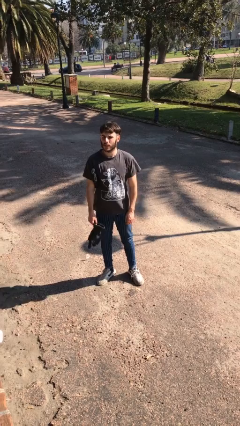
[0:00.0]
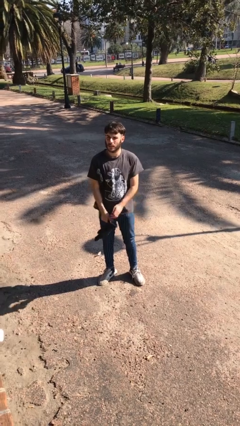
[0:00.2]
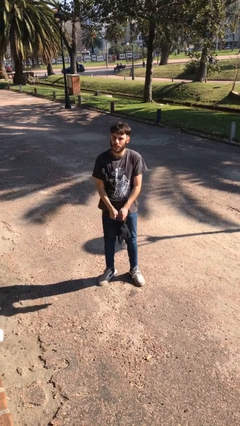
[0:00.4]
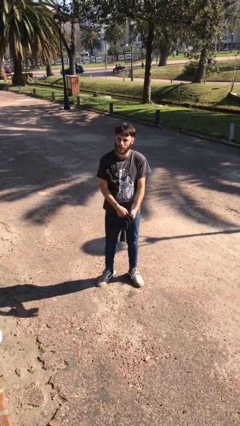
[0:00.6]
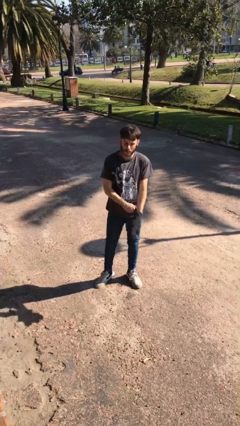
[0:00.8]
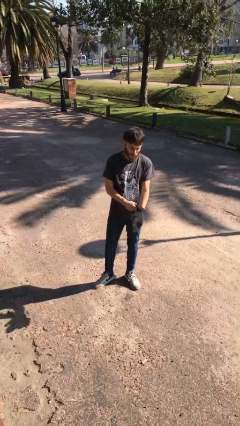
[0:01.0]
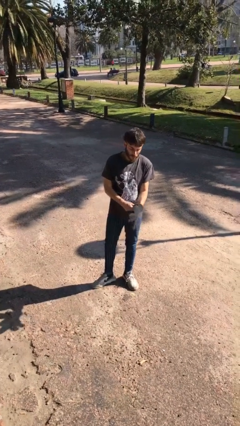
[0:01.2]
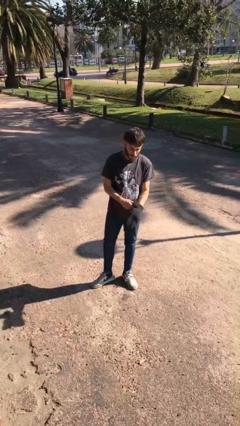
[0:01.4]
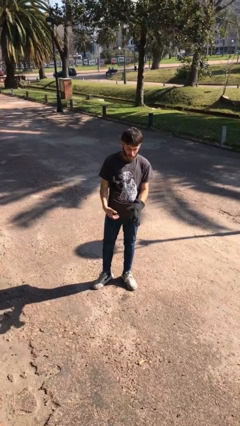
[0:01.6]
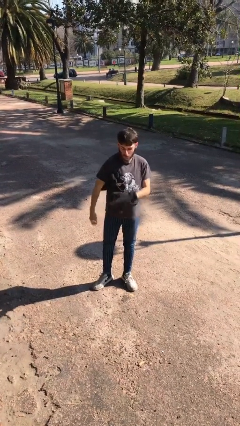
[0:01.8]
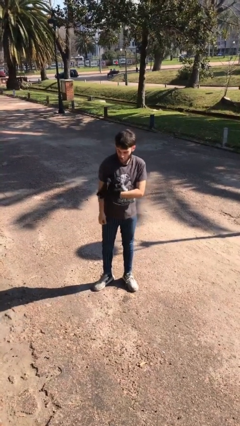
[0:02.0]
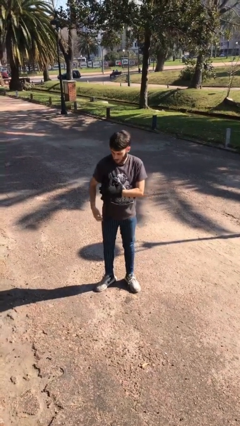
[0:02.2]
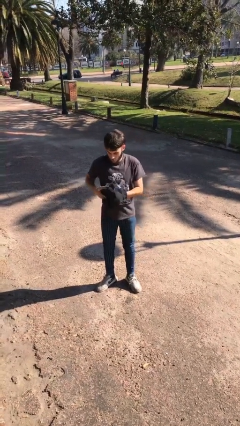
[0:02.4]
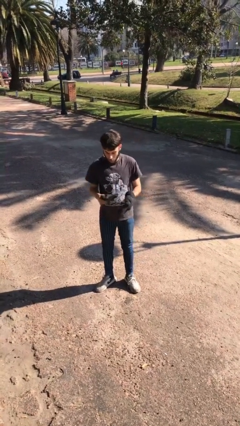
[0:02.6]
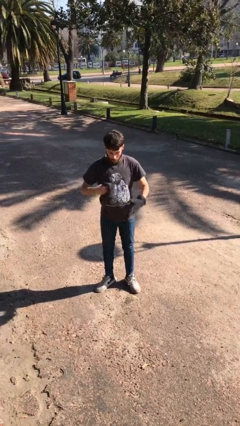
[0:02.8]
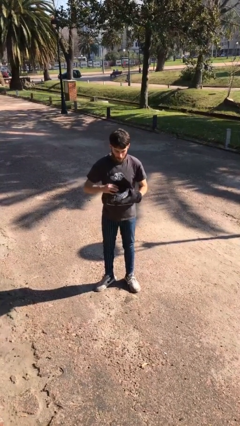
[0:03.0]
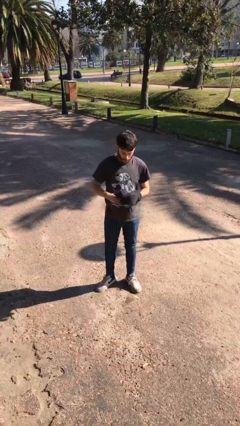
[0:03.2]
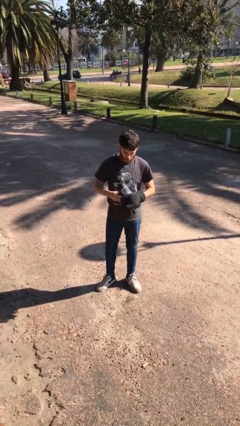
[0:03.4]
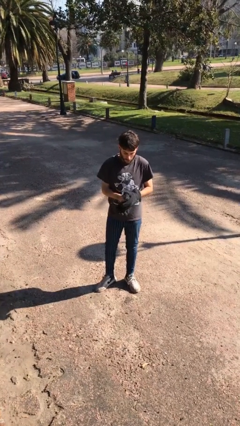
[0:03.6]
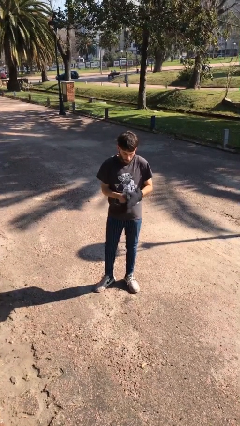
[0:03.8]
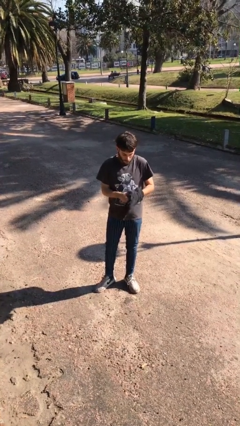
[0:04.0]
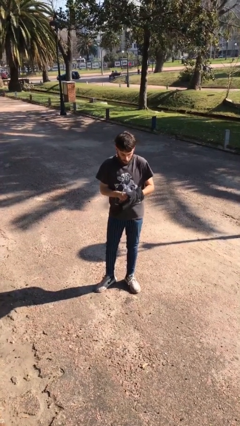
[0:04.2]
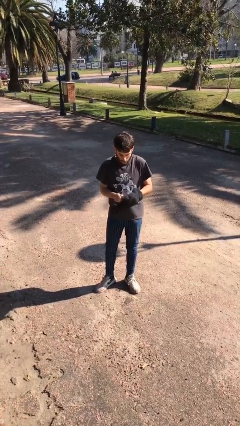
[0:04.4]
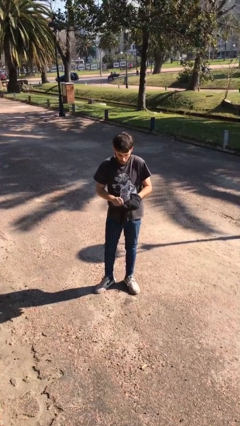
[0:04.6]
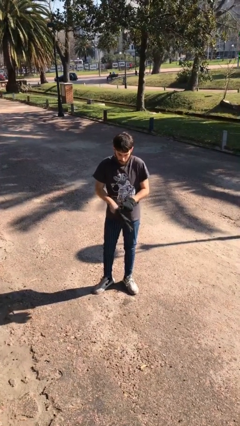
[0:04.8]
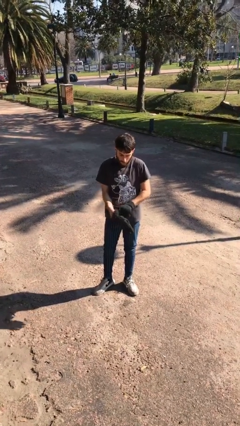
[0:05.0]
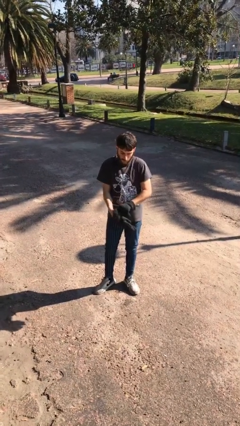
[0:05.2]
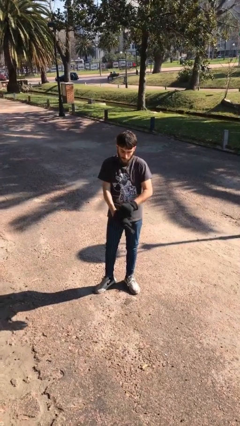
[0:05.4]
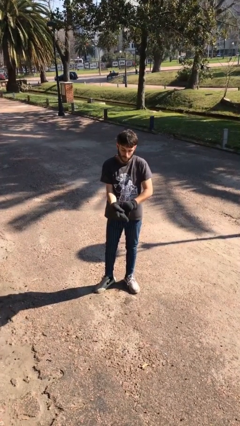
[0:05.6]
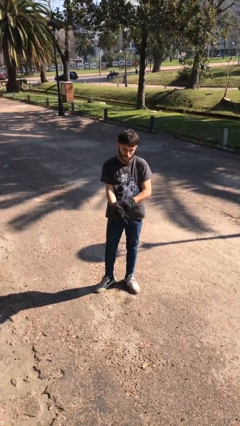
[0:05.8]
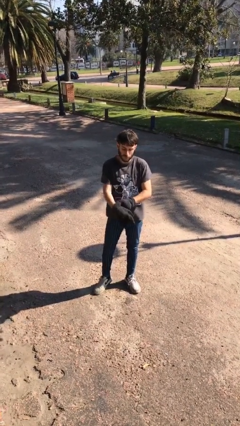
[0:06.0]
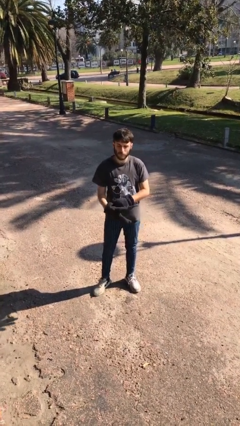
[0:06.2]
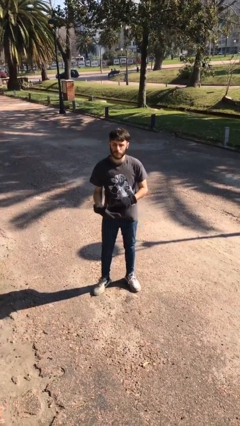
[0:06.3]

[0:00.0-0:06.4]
person puts on gloves

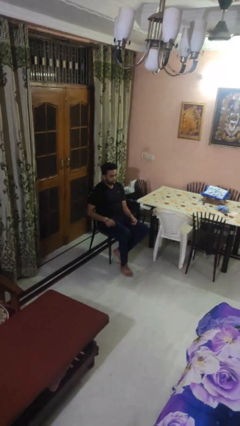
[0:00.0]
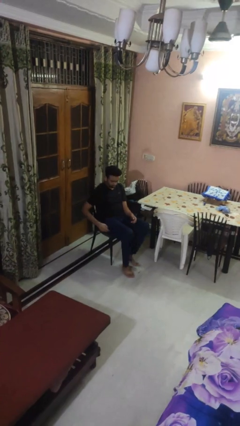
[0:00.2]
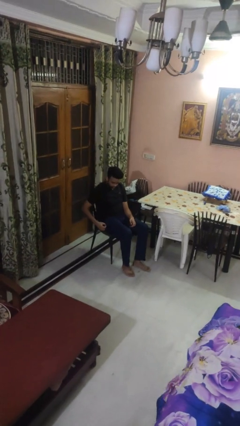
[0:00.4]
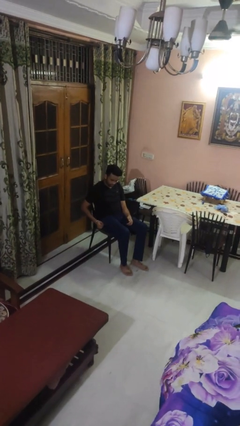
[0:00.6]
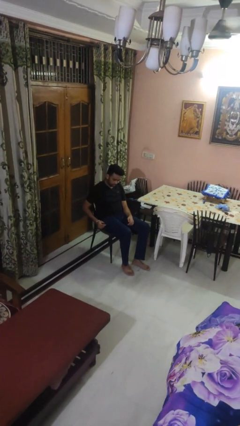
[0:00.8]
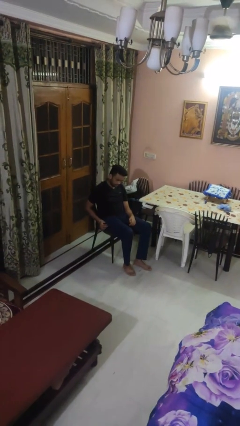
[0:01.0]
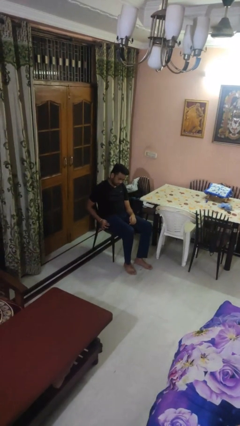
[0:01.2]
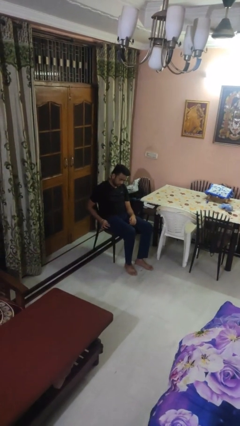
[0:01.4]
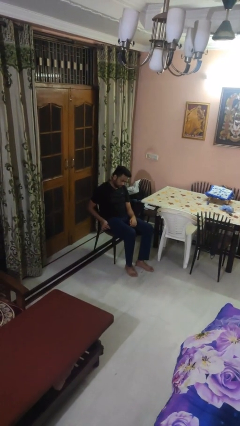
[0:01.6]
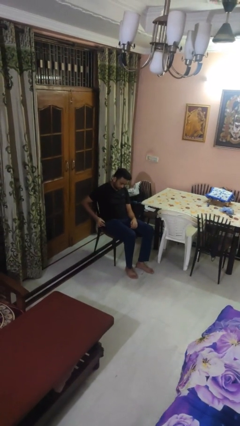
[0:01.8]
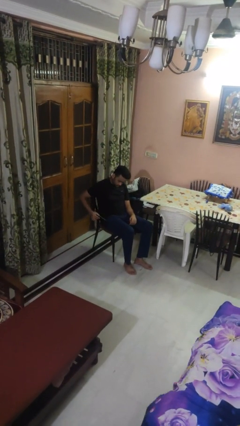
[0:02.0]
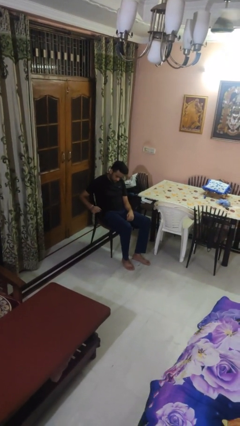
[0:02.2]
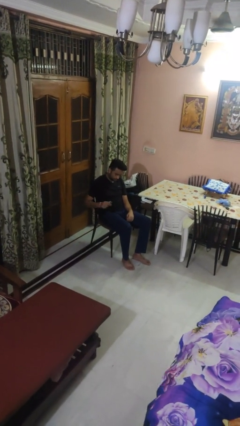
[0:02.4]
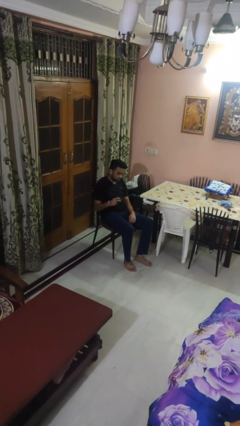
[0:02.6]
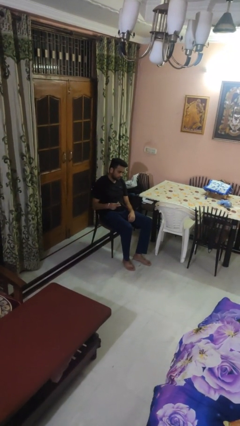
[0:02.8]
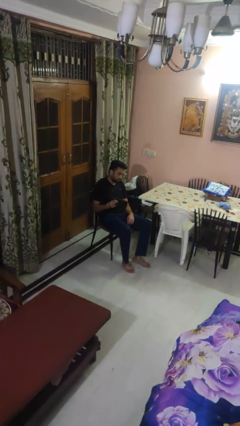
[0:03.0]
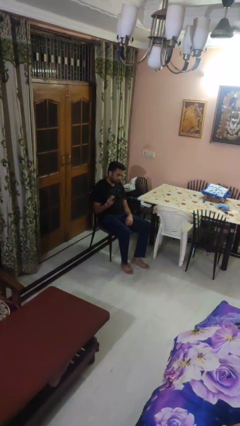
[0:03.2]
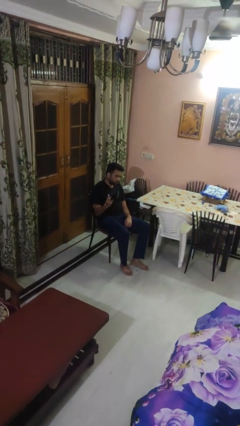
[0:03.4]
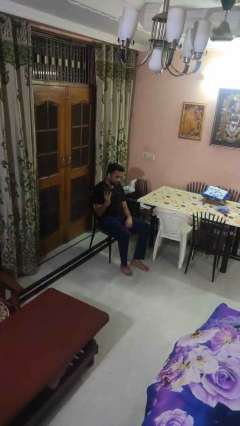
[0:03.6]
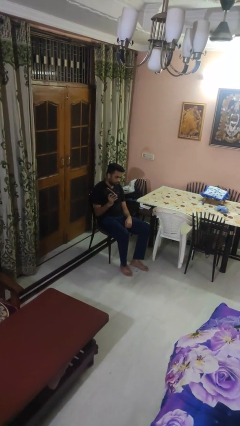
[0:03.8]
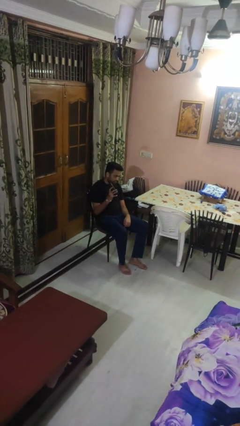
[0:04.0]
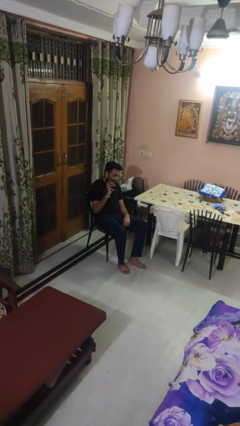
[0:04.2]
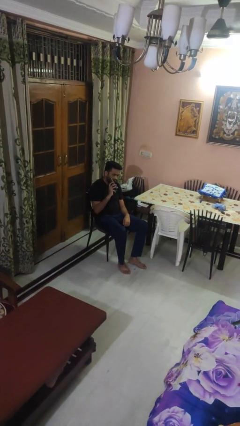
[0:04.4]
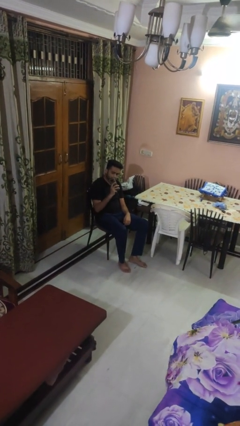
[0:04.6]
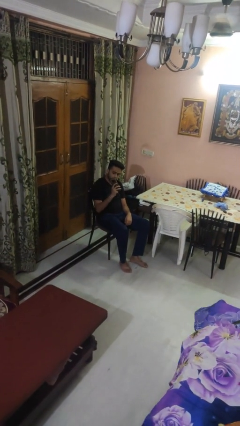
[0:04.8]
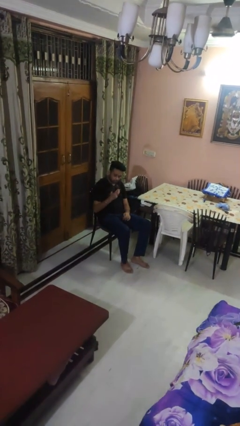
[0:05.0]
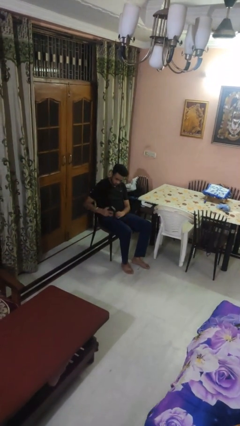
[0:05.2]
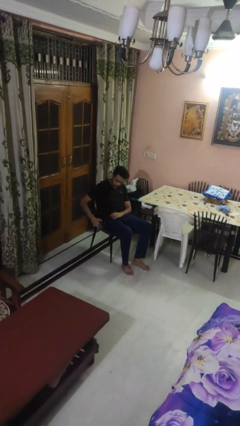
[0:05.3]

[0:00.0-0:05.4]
person takes phone from pocket

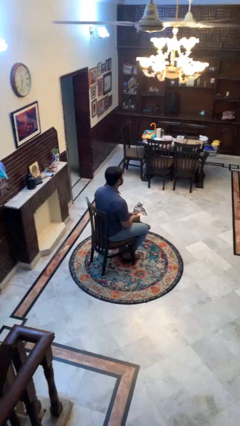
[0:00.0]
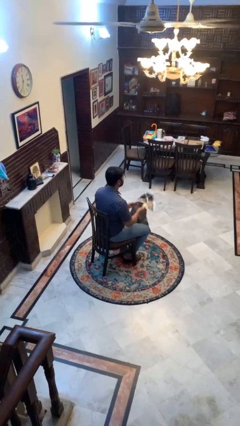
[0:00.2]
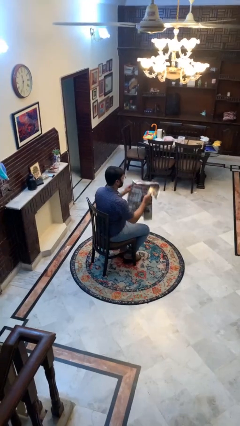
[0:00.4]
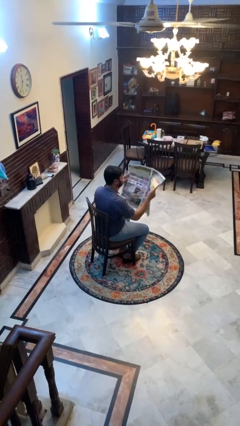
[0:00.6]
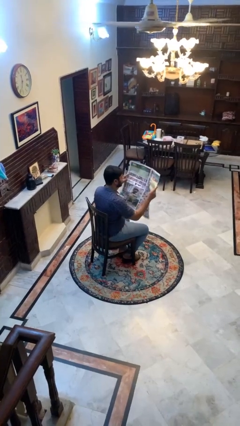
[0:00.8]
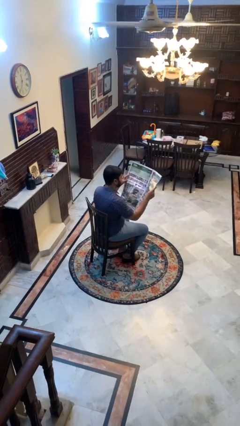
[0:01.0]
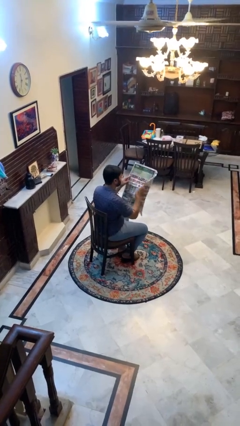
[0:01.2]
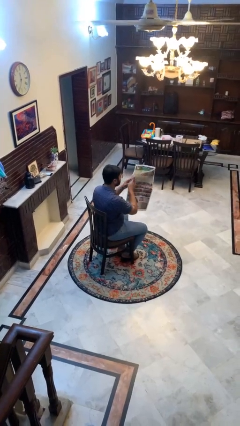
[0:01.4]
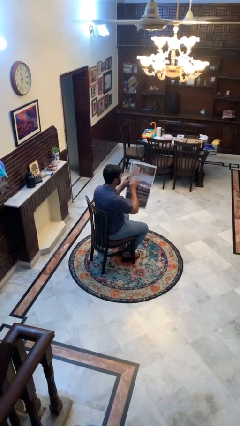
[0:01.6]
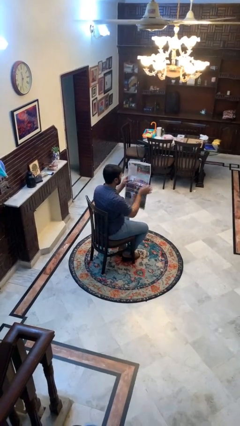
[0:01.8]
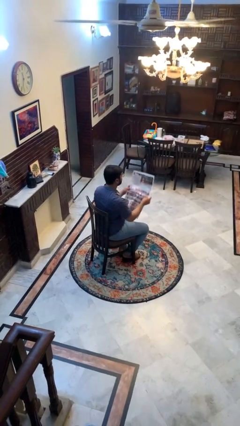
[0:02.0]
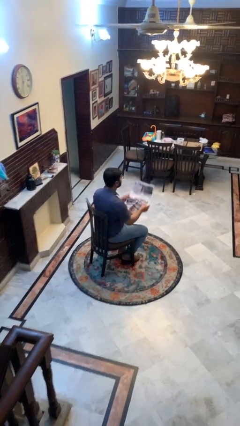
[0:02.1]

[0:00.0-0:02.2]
person reads newspaper

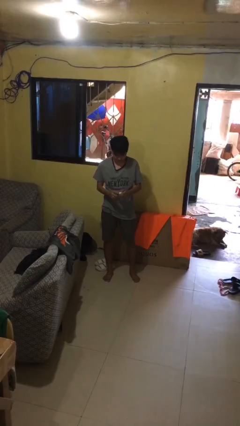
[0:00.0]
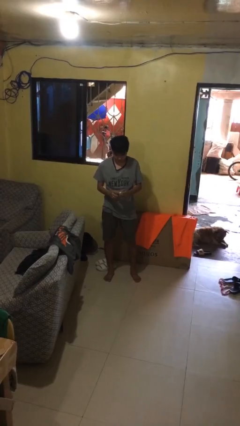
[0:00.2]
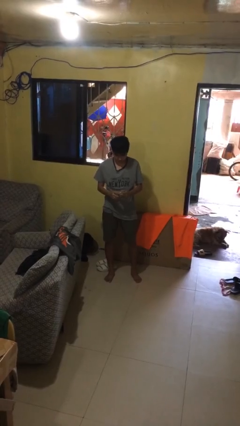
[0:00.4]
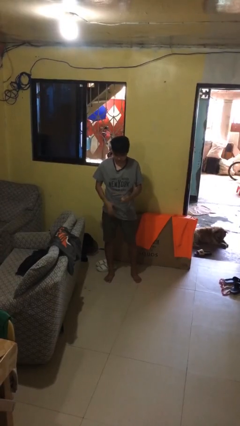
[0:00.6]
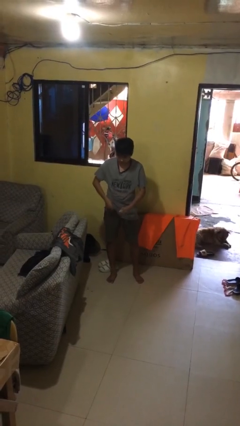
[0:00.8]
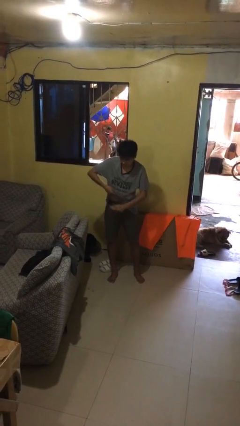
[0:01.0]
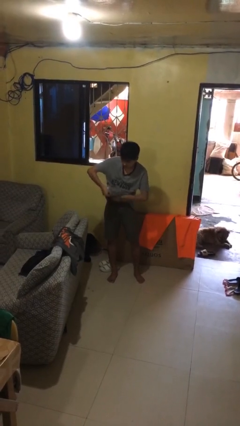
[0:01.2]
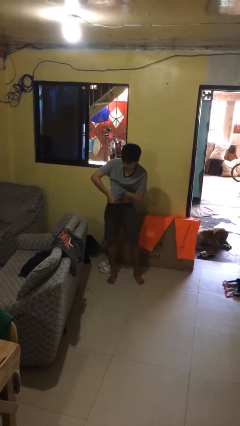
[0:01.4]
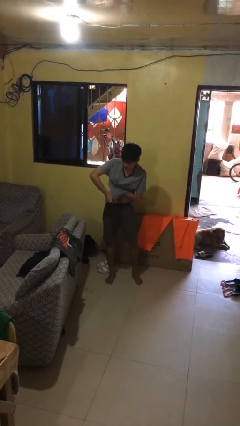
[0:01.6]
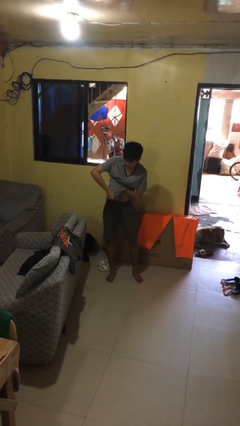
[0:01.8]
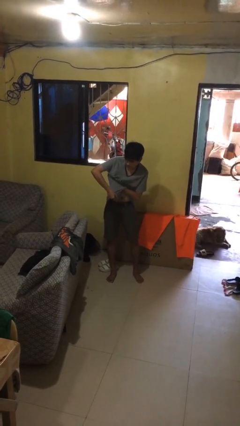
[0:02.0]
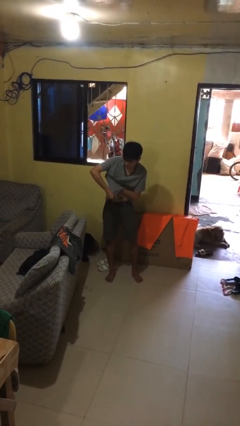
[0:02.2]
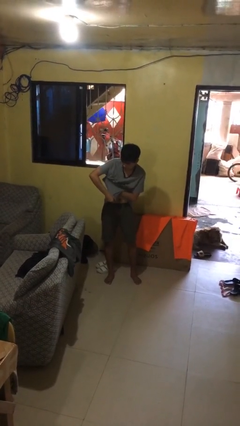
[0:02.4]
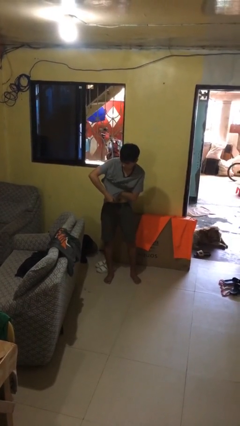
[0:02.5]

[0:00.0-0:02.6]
person applies deodorant

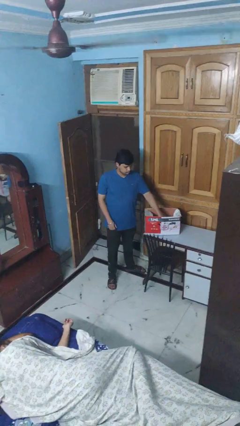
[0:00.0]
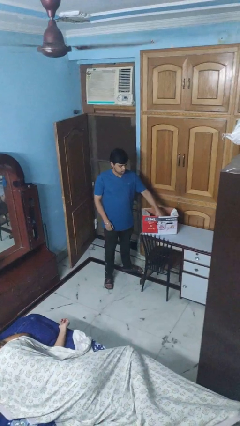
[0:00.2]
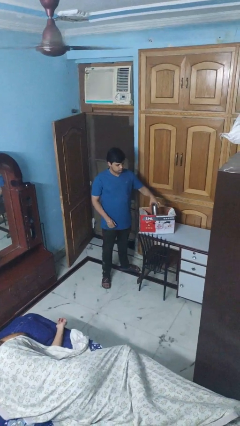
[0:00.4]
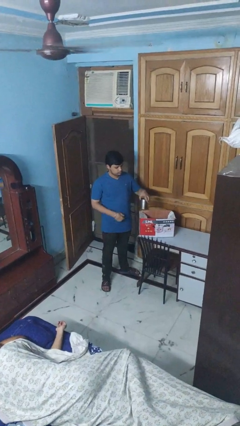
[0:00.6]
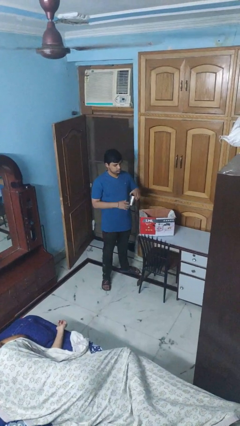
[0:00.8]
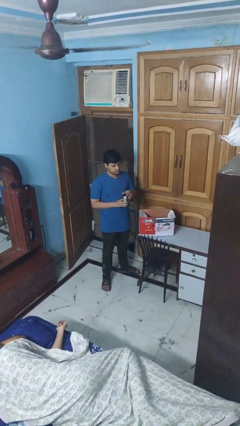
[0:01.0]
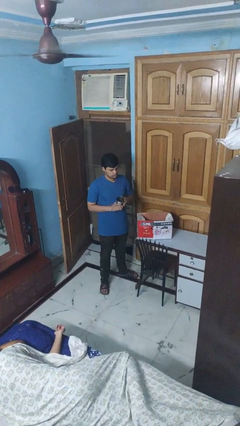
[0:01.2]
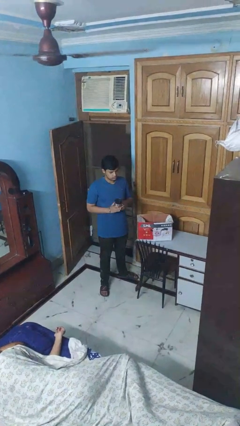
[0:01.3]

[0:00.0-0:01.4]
person takes object from box
